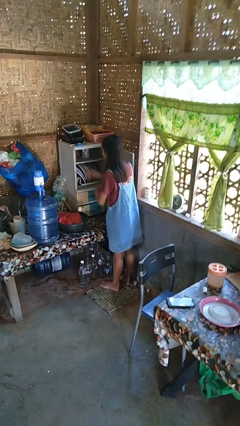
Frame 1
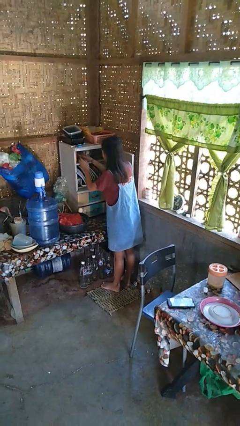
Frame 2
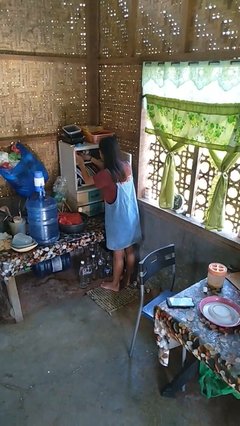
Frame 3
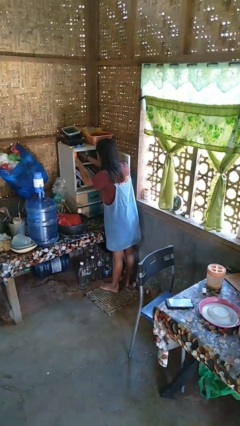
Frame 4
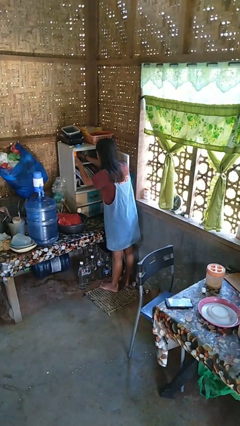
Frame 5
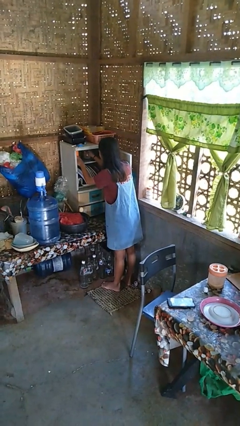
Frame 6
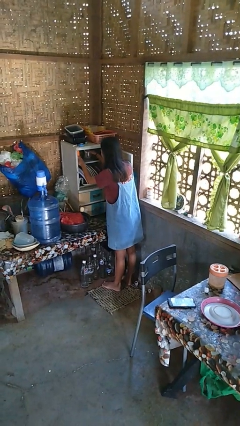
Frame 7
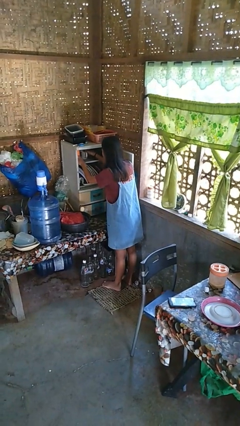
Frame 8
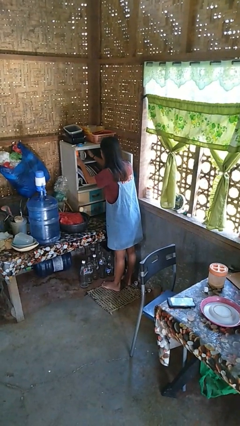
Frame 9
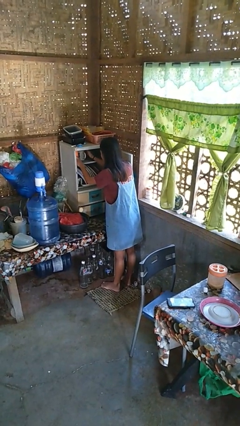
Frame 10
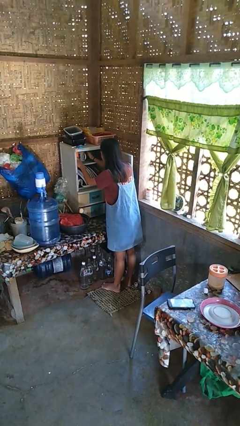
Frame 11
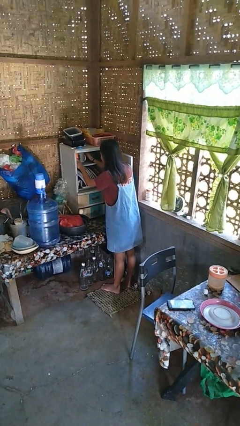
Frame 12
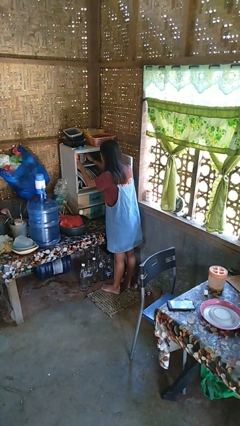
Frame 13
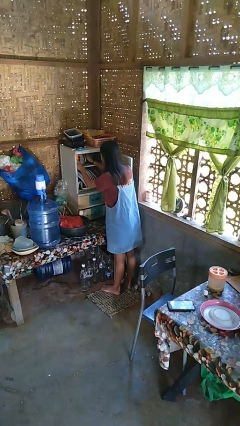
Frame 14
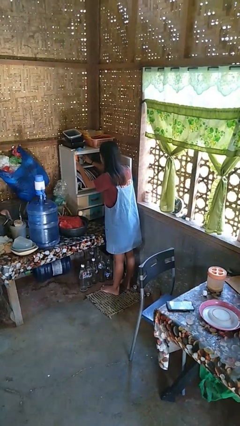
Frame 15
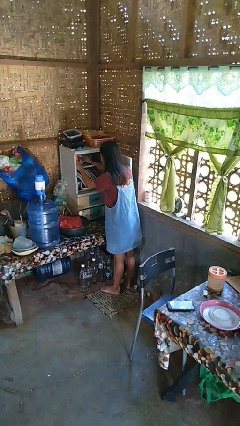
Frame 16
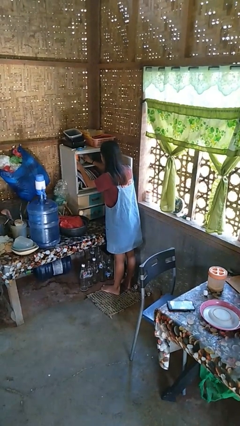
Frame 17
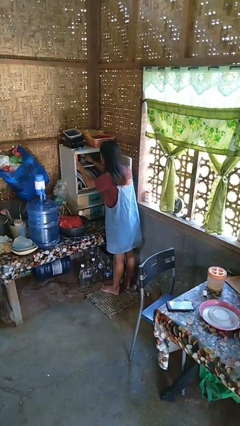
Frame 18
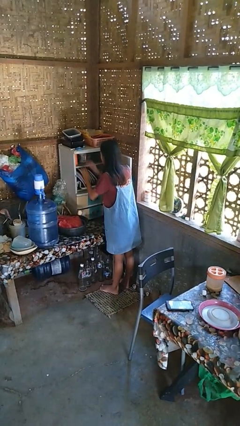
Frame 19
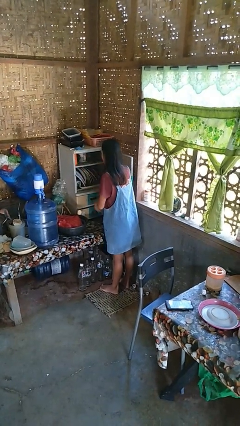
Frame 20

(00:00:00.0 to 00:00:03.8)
person searches in cabinet

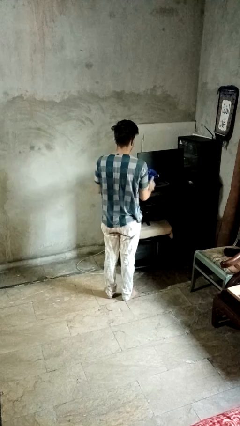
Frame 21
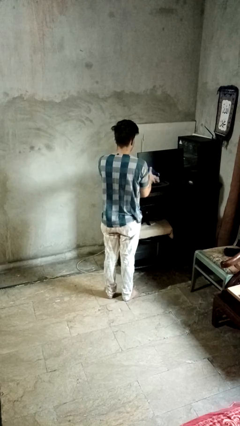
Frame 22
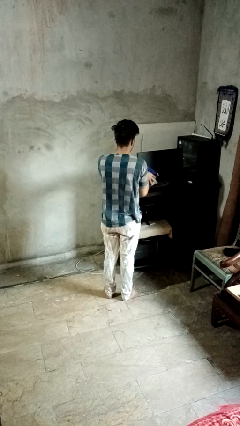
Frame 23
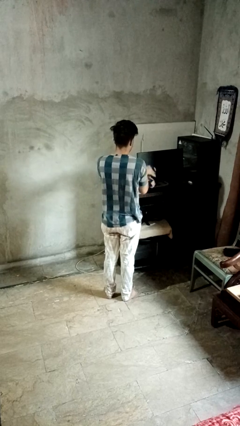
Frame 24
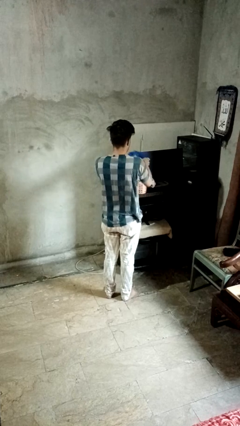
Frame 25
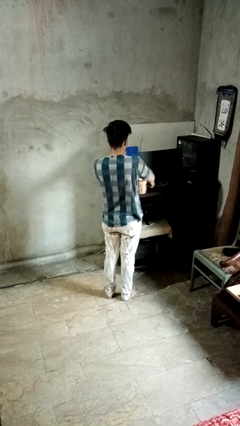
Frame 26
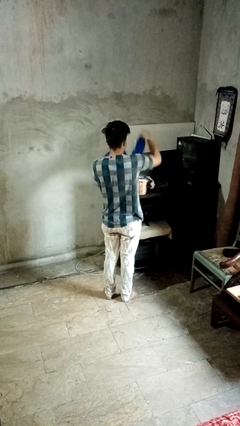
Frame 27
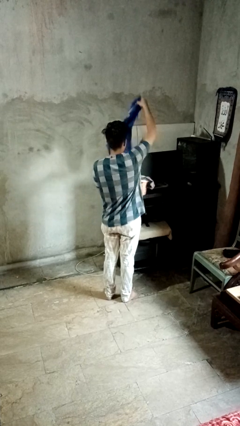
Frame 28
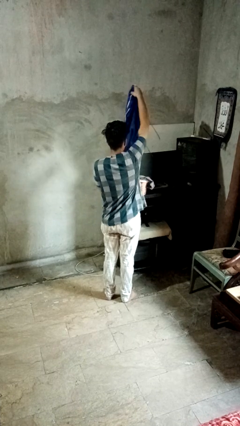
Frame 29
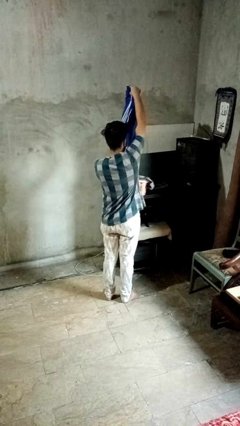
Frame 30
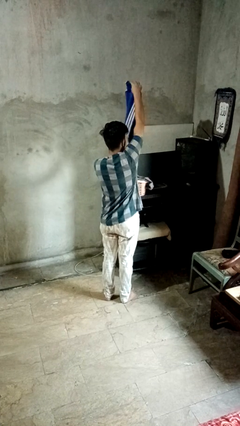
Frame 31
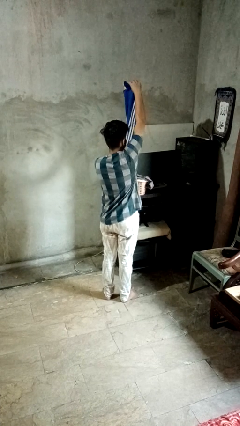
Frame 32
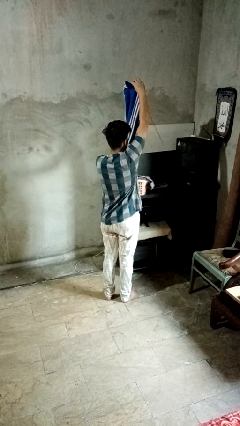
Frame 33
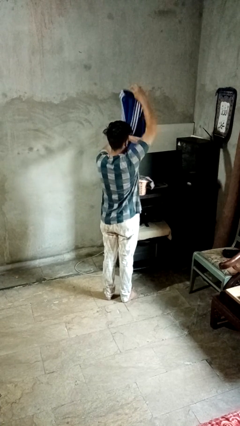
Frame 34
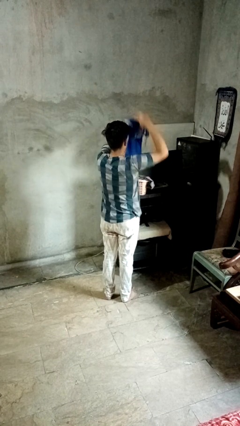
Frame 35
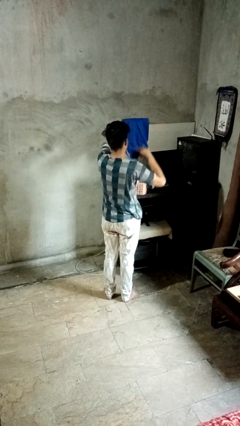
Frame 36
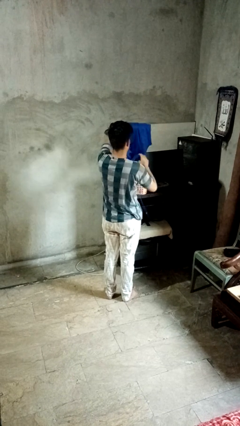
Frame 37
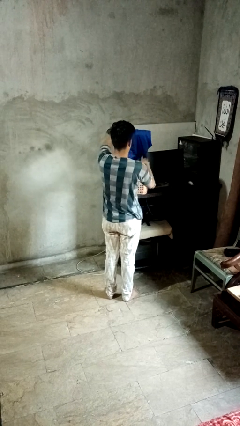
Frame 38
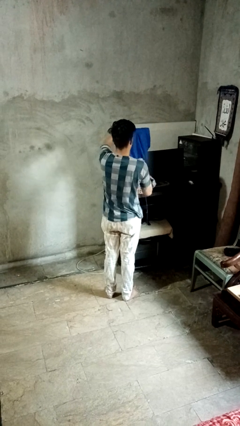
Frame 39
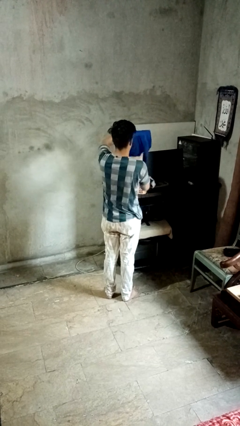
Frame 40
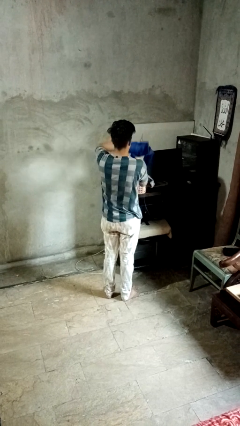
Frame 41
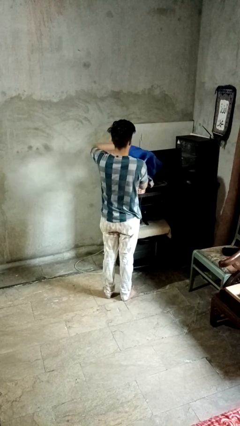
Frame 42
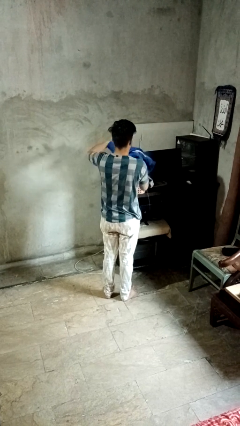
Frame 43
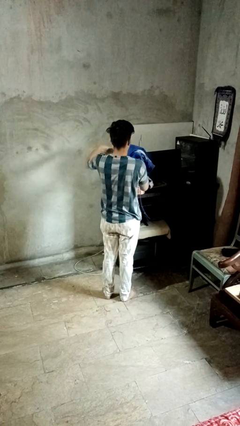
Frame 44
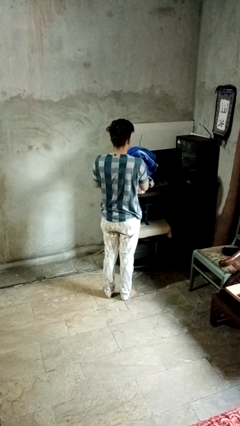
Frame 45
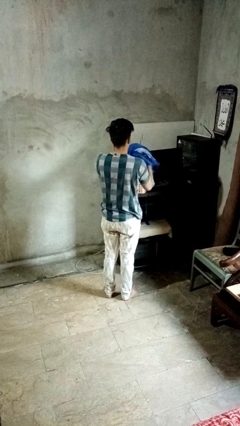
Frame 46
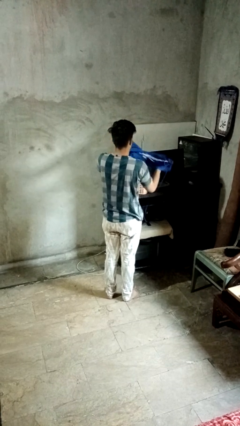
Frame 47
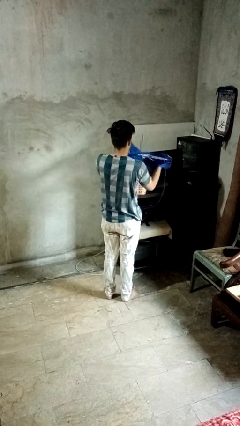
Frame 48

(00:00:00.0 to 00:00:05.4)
person folds pants

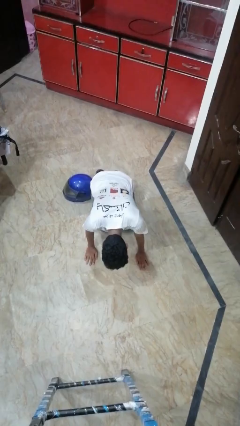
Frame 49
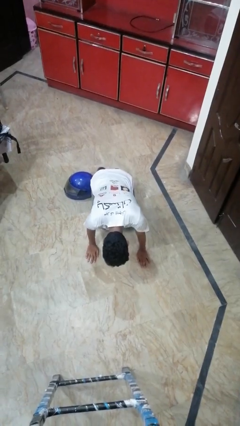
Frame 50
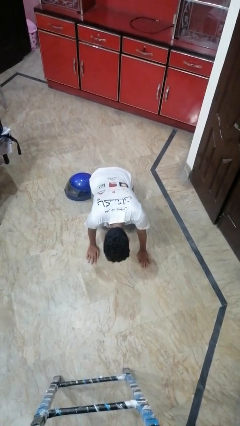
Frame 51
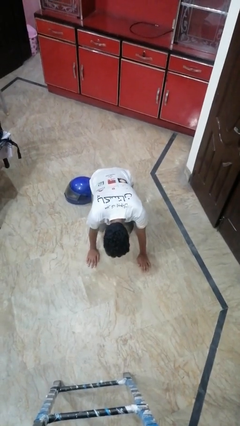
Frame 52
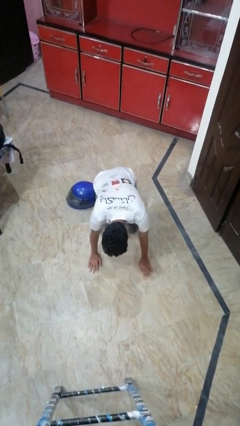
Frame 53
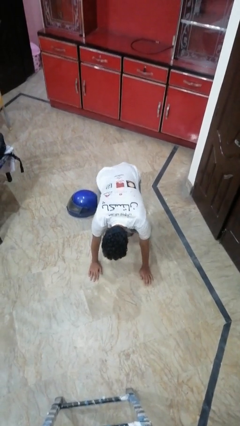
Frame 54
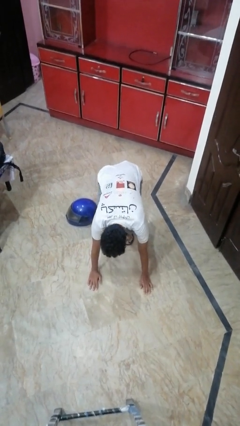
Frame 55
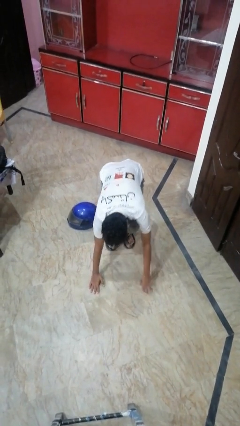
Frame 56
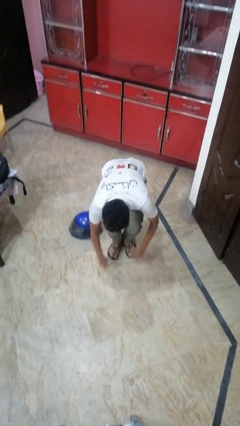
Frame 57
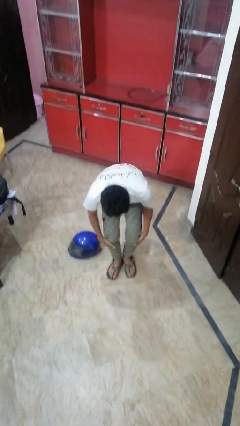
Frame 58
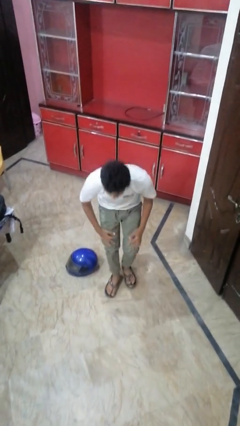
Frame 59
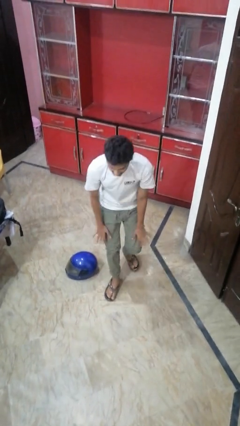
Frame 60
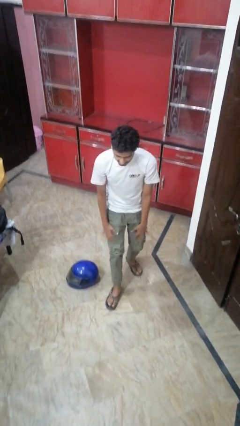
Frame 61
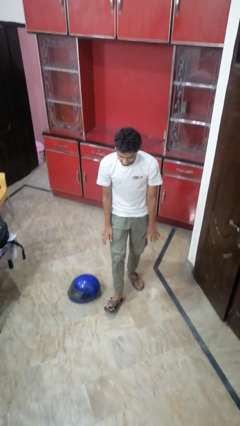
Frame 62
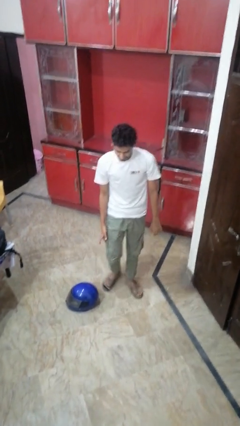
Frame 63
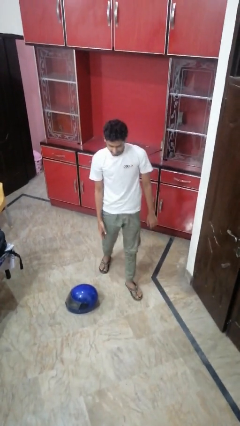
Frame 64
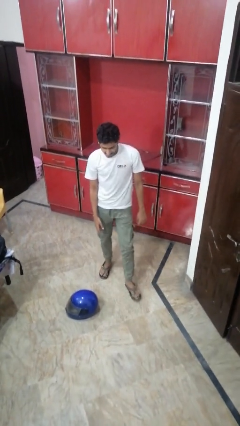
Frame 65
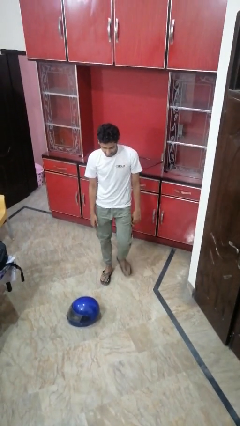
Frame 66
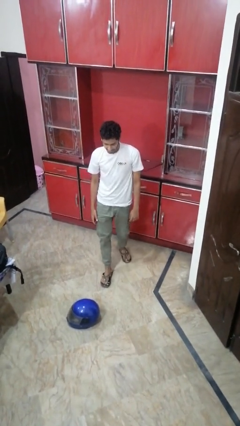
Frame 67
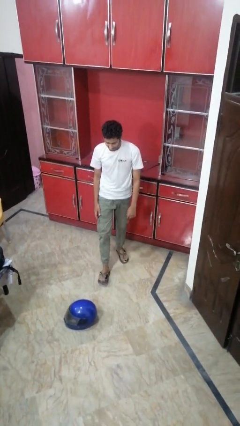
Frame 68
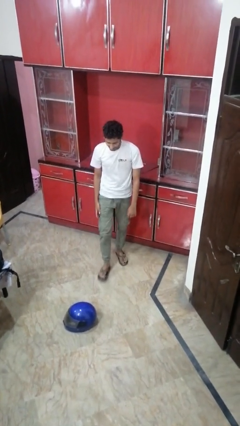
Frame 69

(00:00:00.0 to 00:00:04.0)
person stands up from floor

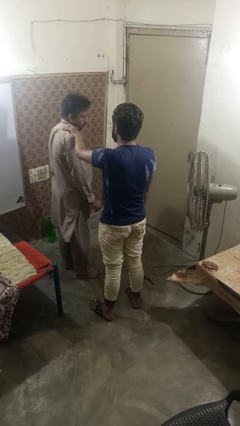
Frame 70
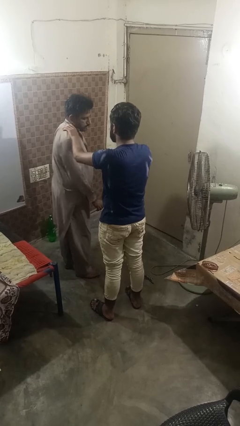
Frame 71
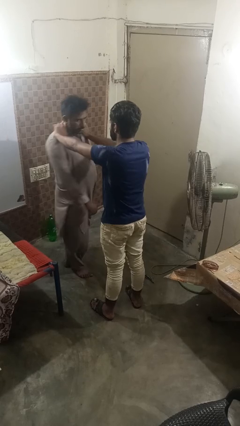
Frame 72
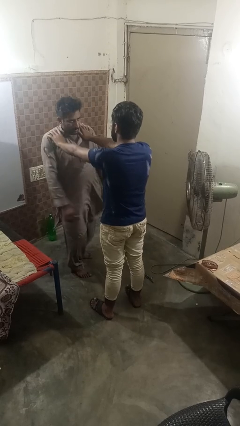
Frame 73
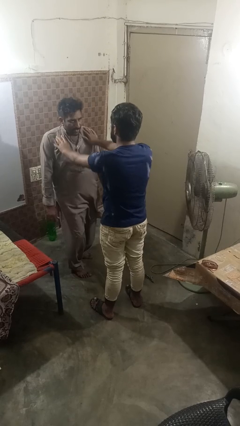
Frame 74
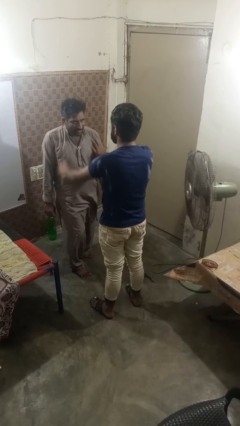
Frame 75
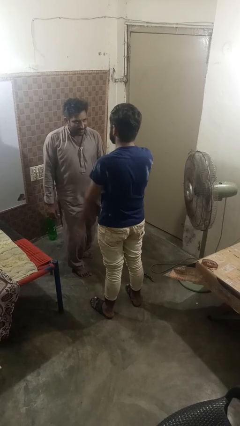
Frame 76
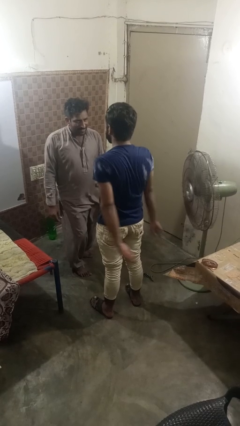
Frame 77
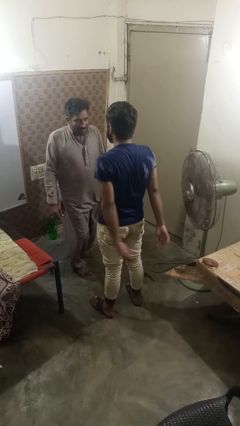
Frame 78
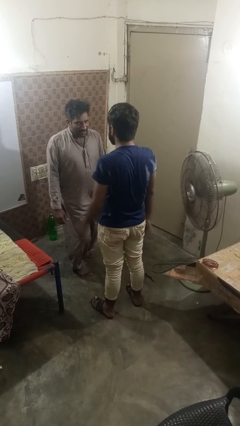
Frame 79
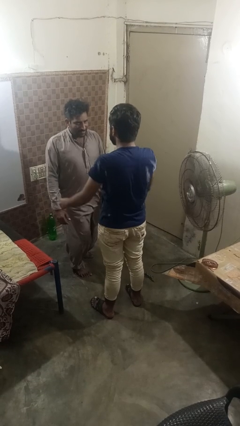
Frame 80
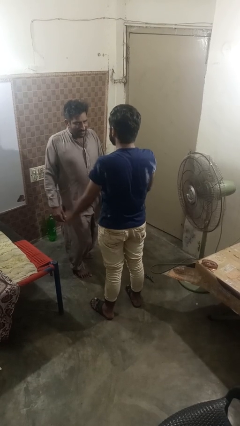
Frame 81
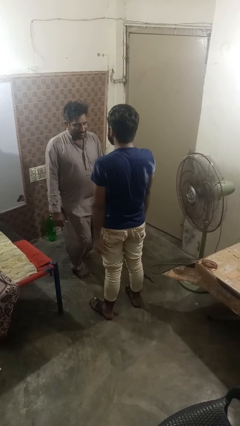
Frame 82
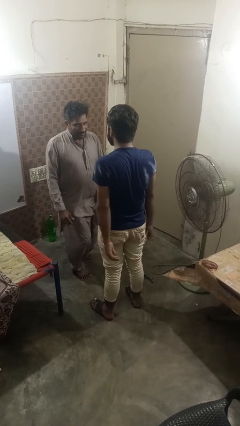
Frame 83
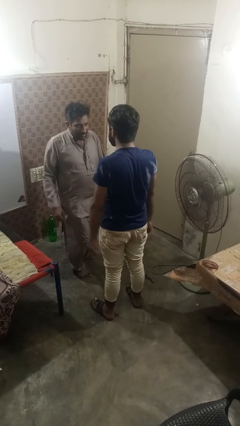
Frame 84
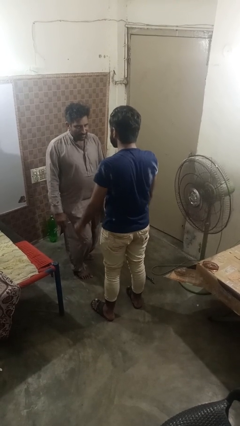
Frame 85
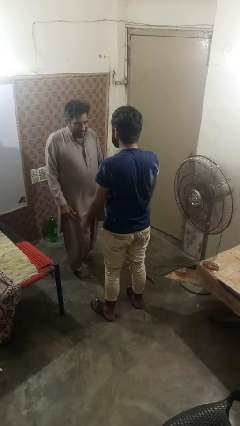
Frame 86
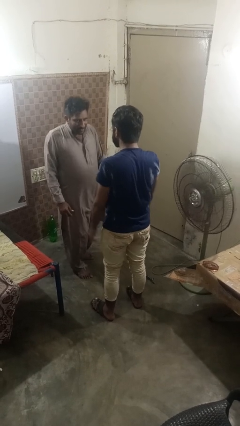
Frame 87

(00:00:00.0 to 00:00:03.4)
person spins person around

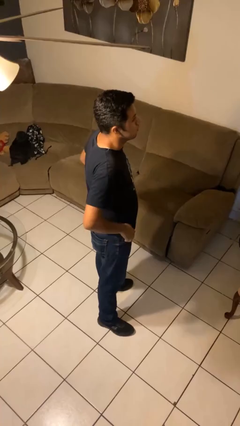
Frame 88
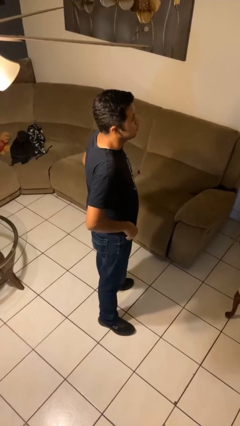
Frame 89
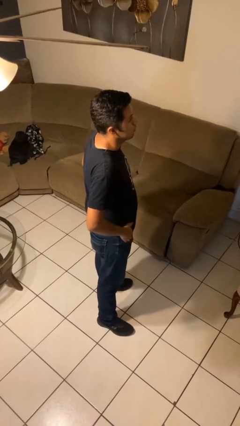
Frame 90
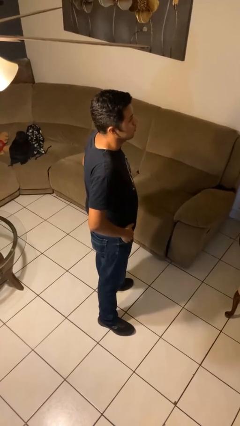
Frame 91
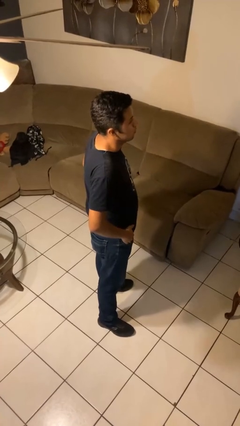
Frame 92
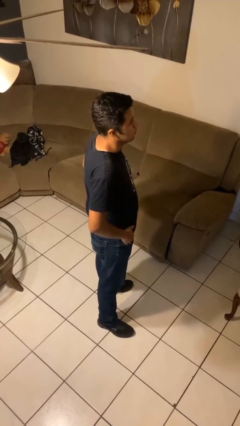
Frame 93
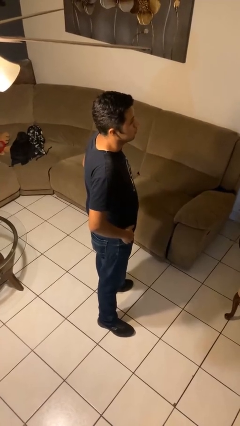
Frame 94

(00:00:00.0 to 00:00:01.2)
person puts hands in back pockets
